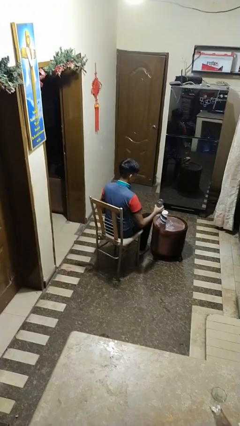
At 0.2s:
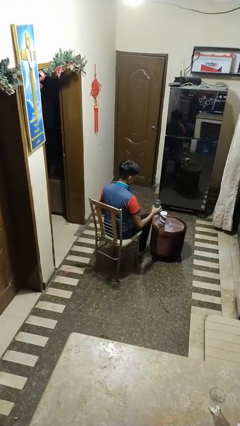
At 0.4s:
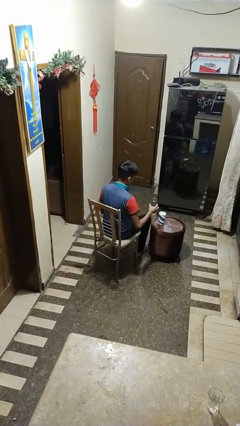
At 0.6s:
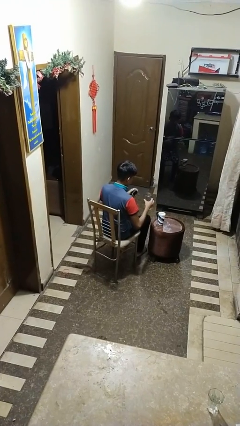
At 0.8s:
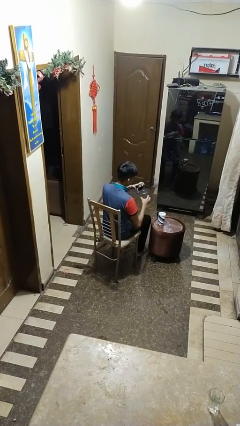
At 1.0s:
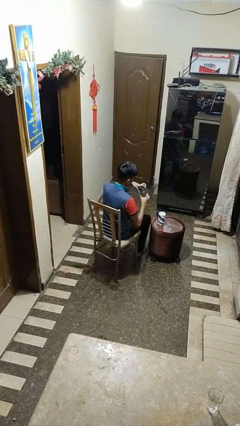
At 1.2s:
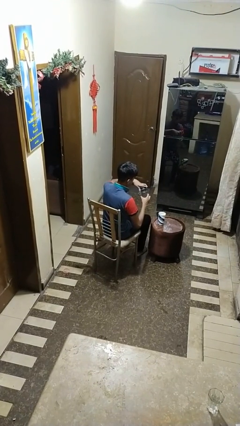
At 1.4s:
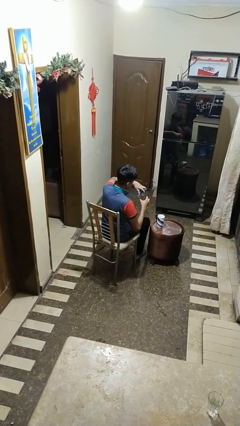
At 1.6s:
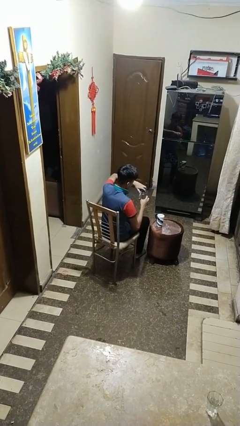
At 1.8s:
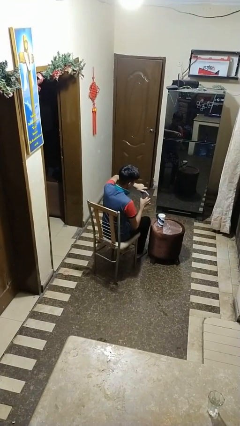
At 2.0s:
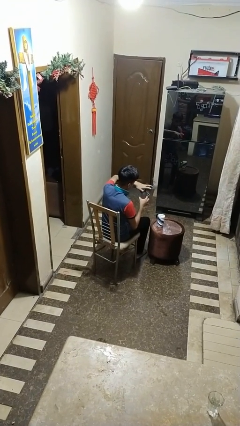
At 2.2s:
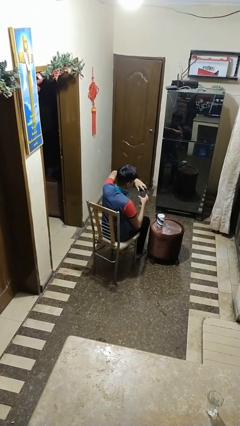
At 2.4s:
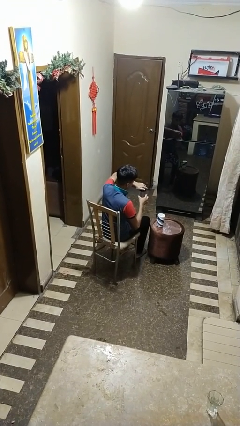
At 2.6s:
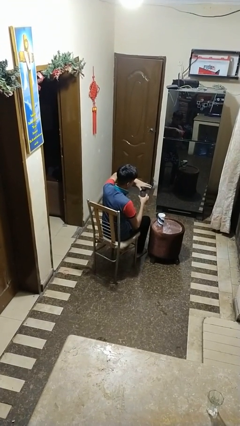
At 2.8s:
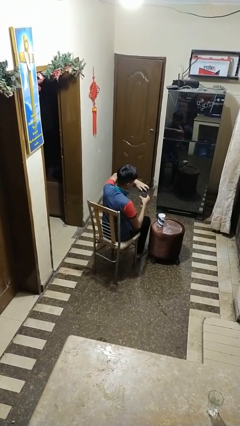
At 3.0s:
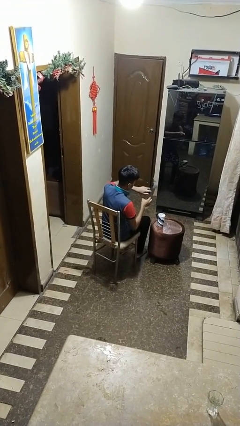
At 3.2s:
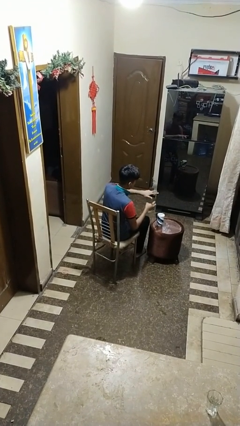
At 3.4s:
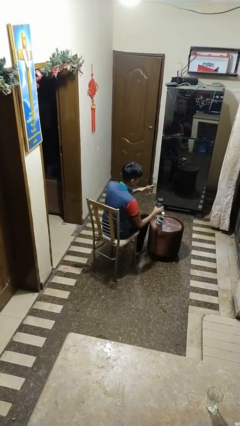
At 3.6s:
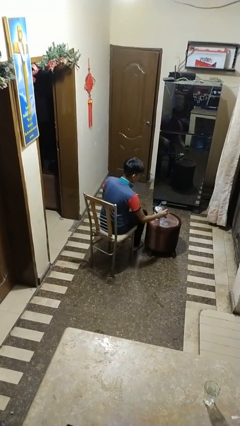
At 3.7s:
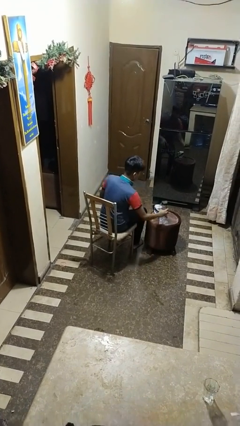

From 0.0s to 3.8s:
person screws lid to bottle

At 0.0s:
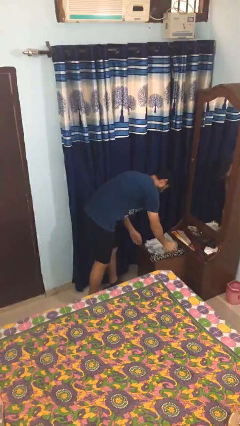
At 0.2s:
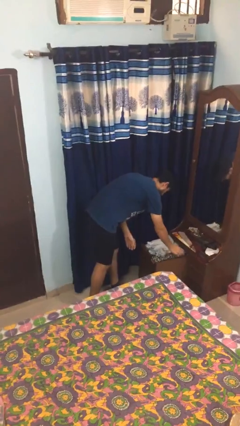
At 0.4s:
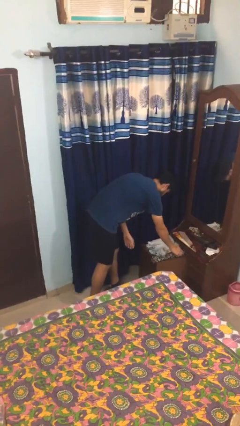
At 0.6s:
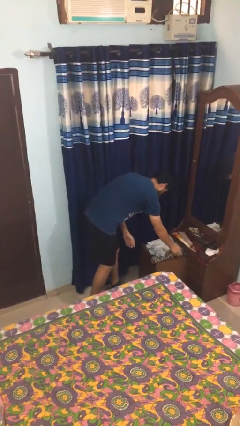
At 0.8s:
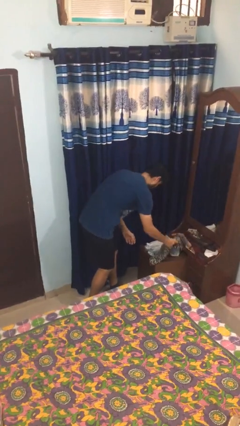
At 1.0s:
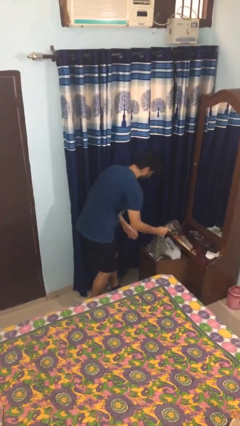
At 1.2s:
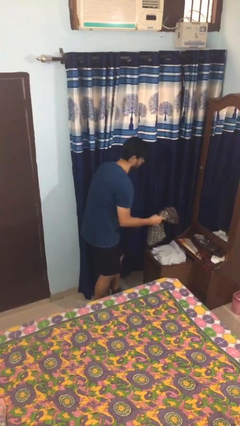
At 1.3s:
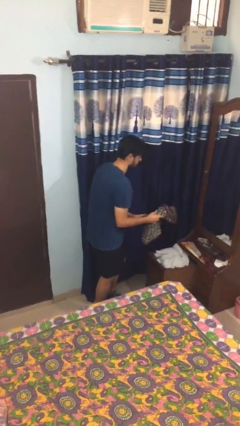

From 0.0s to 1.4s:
person takes clothes from dresser

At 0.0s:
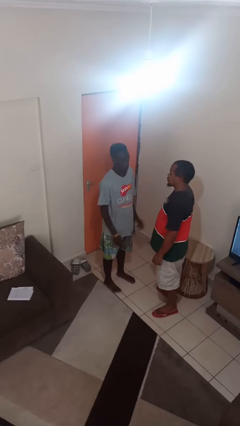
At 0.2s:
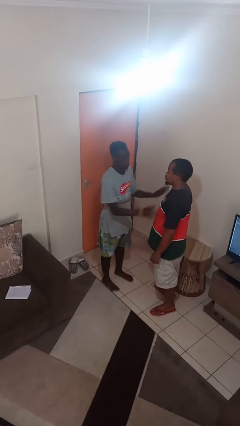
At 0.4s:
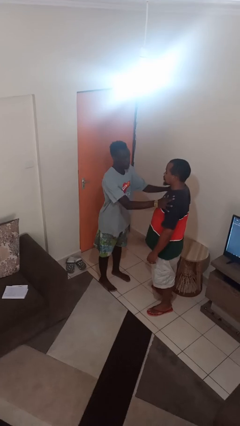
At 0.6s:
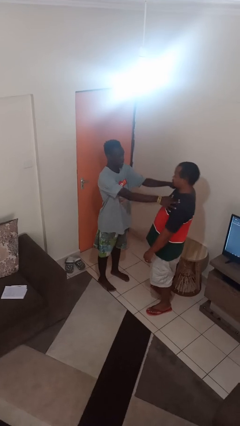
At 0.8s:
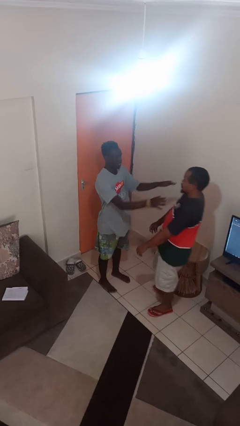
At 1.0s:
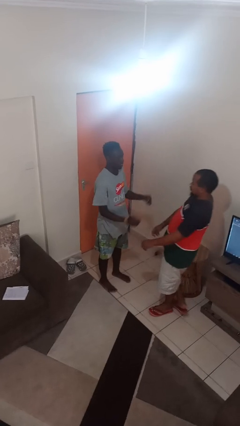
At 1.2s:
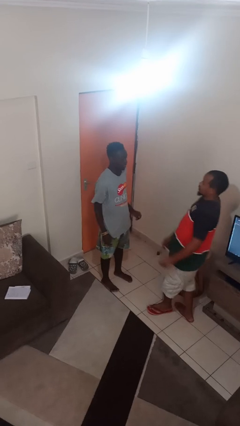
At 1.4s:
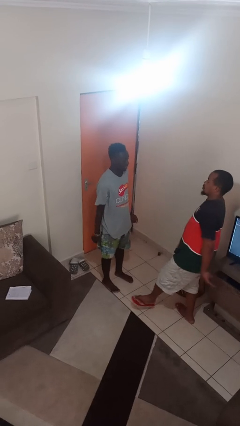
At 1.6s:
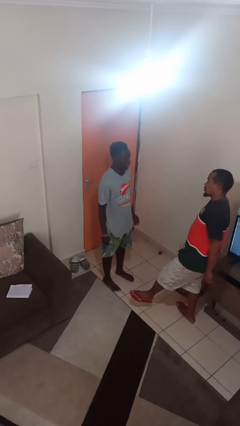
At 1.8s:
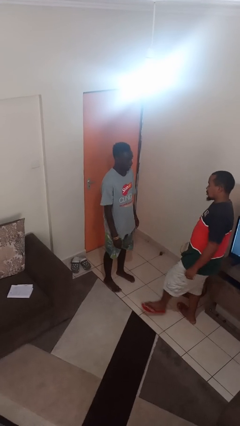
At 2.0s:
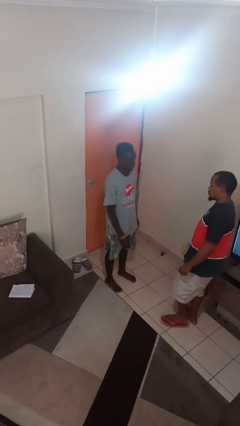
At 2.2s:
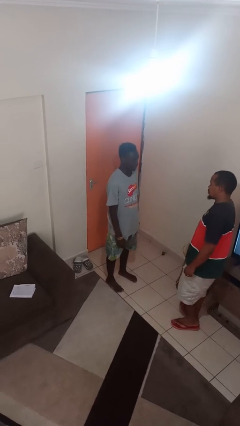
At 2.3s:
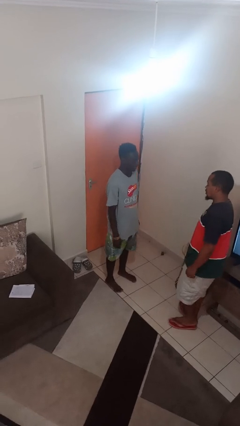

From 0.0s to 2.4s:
person shoves person

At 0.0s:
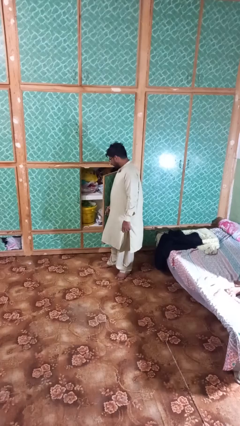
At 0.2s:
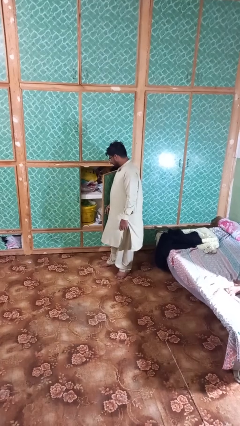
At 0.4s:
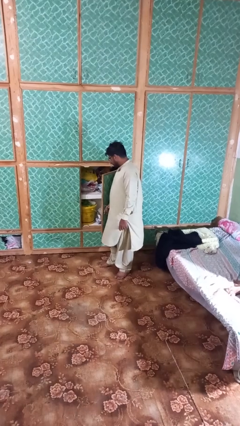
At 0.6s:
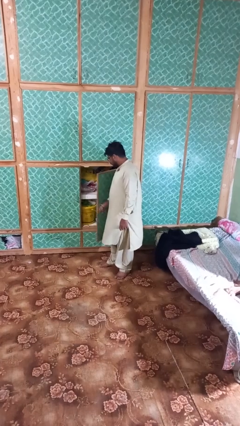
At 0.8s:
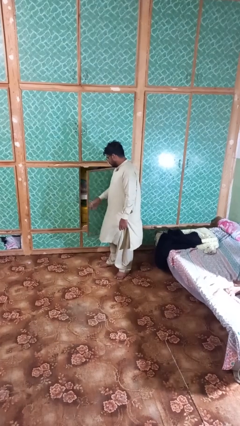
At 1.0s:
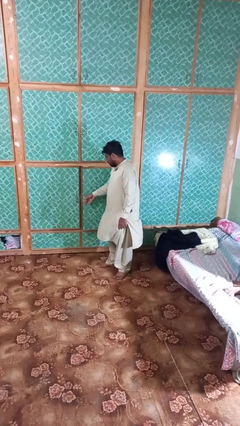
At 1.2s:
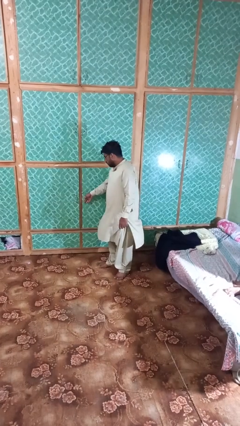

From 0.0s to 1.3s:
person closes closet door

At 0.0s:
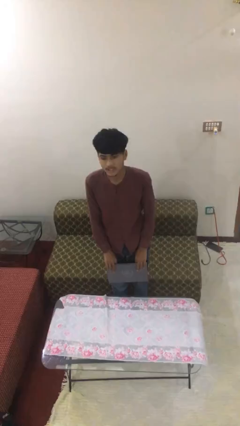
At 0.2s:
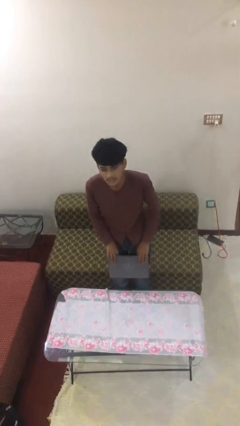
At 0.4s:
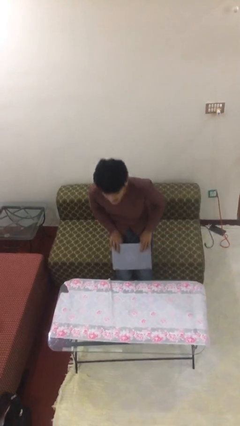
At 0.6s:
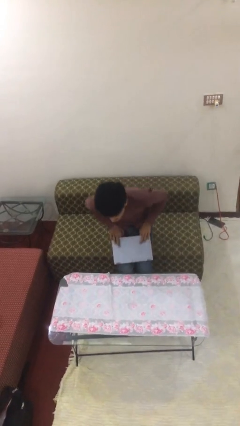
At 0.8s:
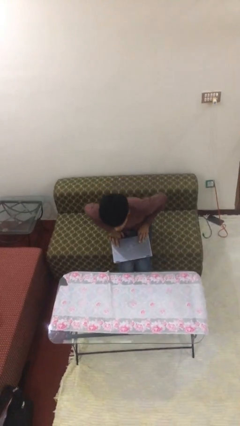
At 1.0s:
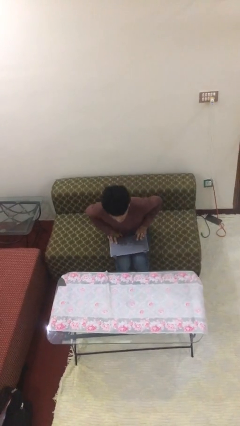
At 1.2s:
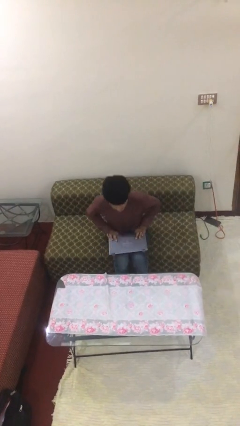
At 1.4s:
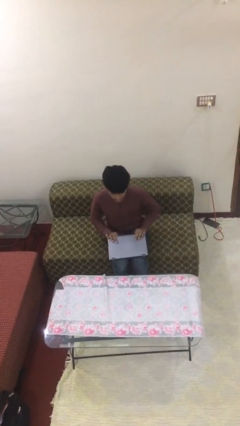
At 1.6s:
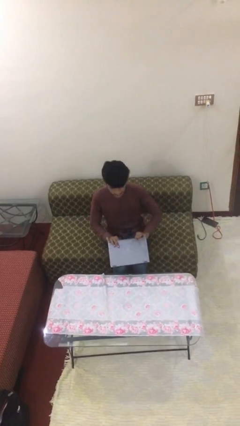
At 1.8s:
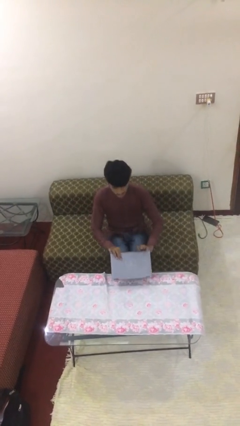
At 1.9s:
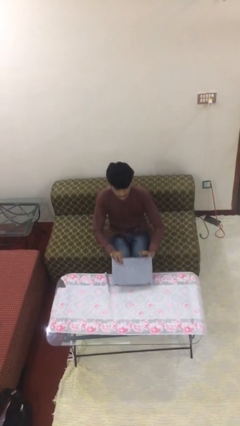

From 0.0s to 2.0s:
person sits down

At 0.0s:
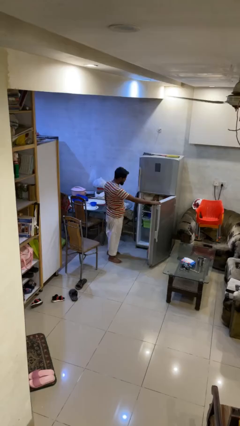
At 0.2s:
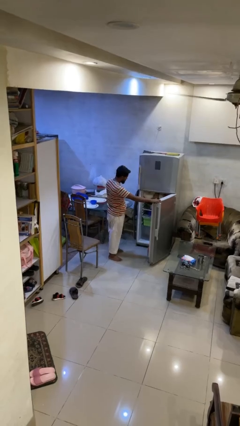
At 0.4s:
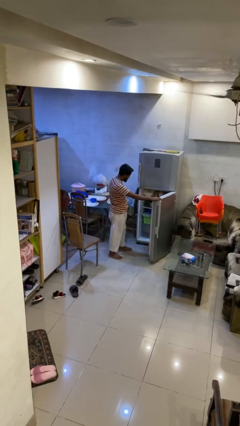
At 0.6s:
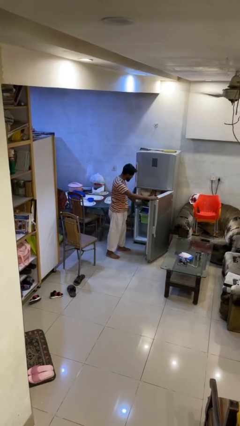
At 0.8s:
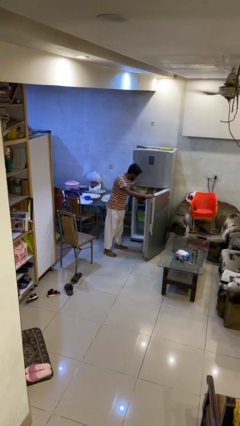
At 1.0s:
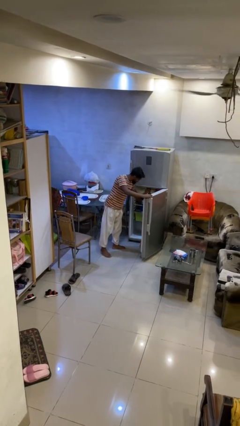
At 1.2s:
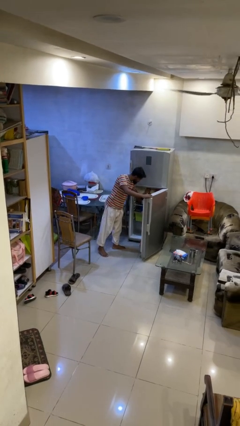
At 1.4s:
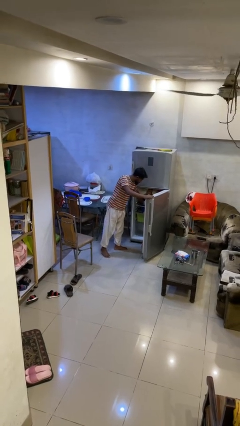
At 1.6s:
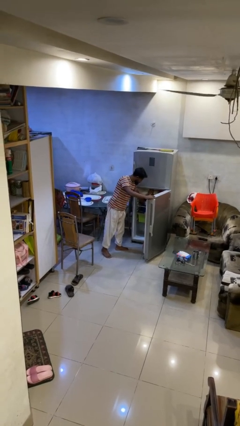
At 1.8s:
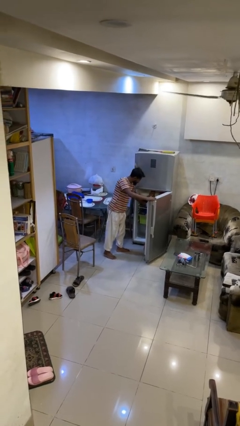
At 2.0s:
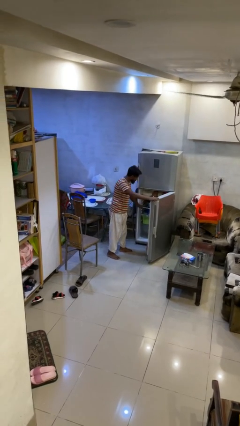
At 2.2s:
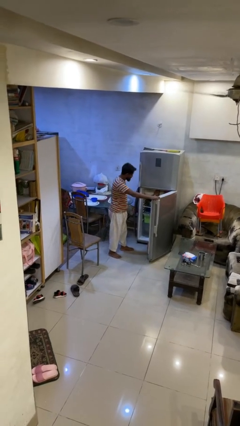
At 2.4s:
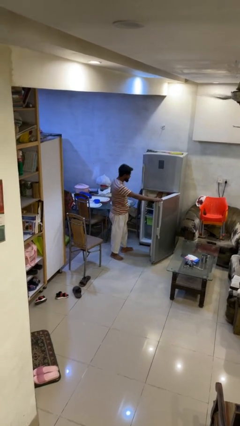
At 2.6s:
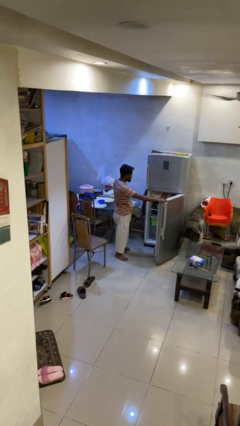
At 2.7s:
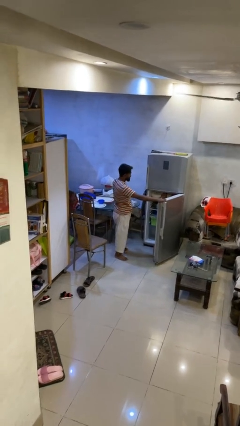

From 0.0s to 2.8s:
person puts object into refrigerator

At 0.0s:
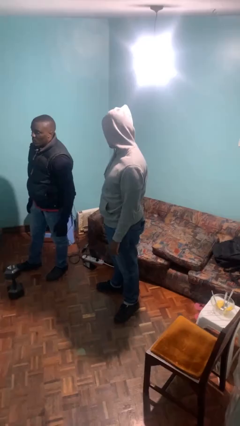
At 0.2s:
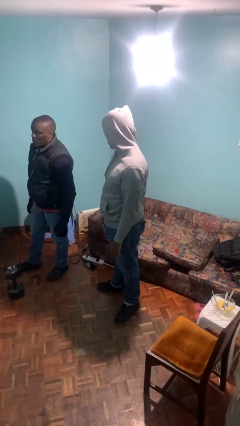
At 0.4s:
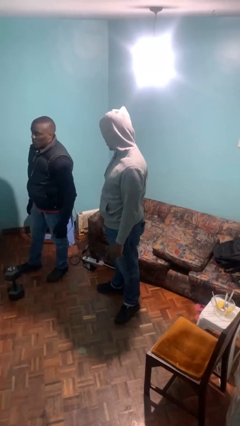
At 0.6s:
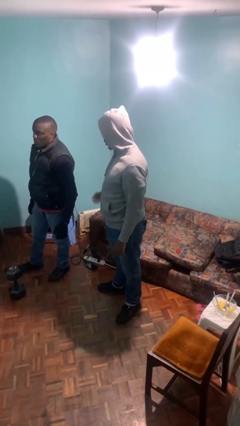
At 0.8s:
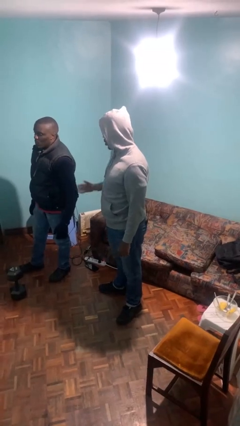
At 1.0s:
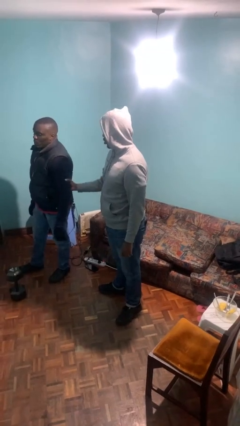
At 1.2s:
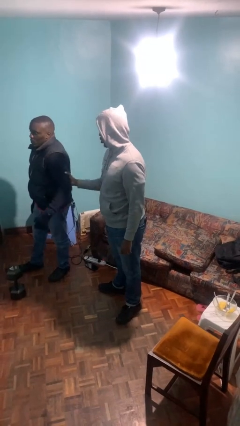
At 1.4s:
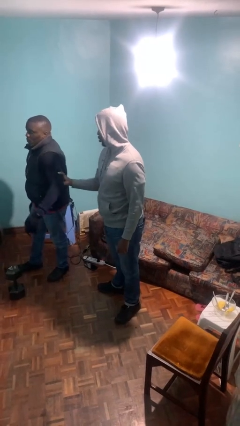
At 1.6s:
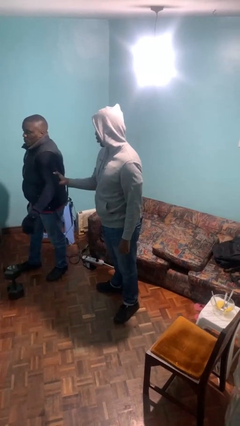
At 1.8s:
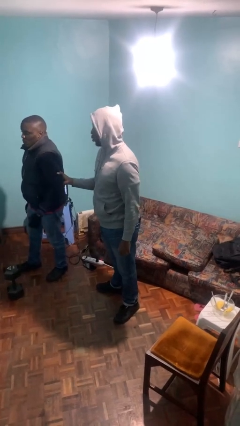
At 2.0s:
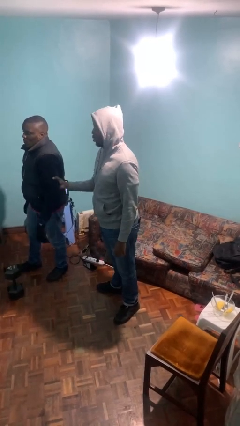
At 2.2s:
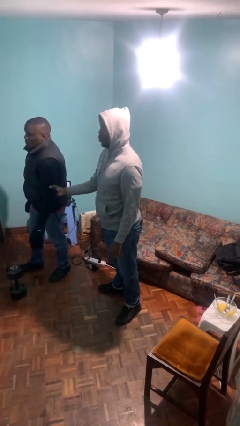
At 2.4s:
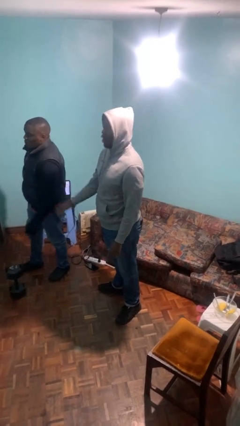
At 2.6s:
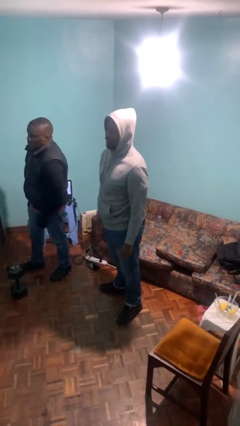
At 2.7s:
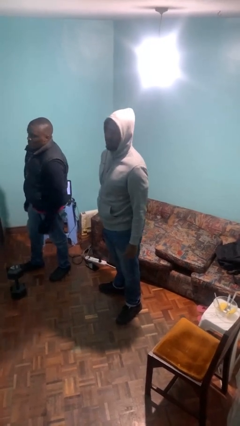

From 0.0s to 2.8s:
person grabs person by bicep

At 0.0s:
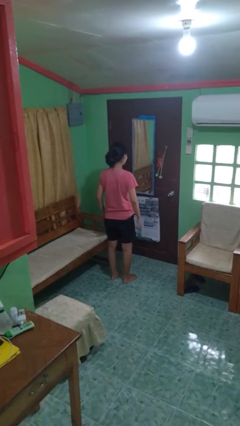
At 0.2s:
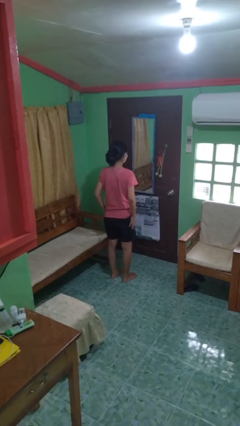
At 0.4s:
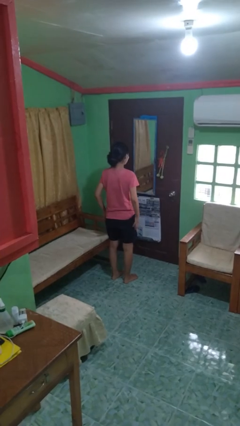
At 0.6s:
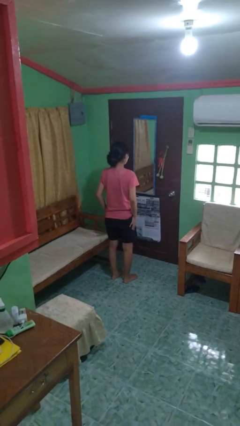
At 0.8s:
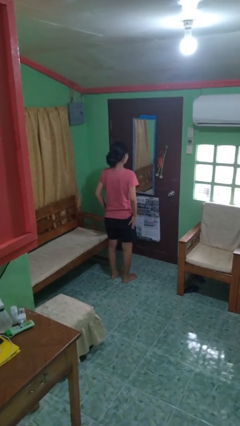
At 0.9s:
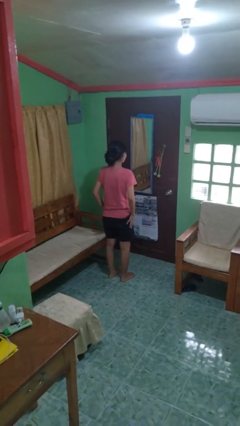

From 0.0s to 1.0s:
person slaps hands on thighs
